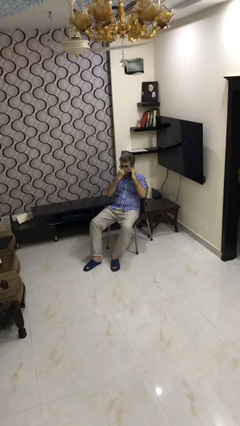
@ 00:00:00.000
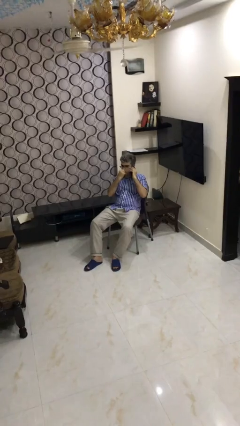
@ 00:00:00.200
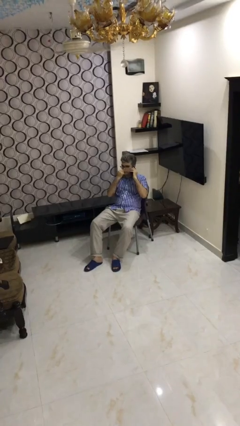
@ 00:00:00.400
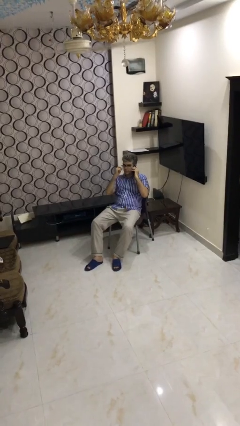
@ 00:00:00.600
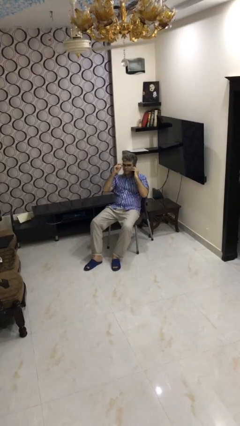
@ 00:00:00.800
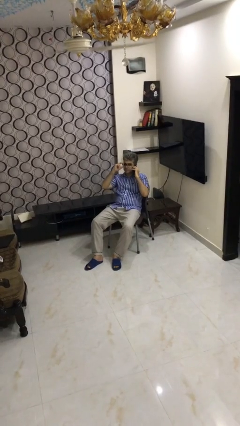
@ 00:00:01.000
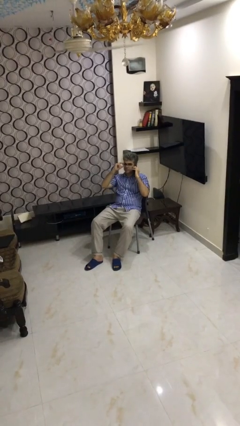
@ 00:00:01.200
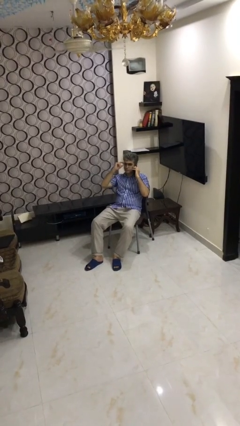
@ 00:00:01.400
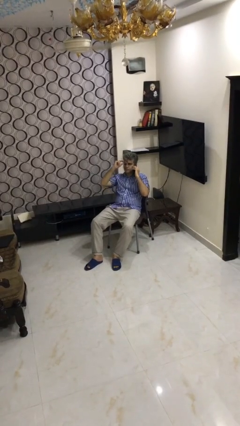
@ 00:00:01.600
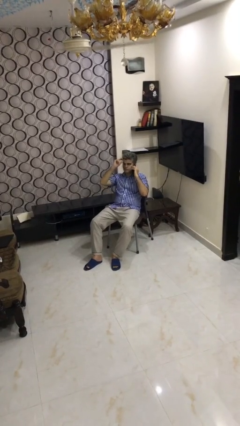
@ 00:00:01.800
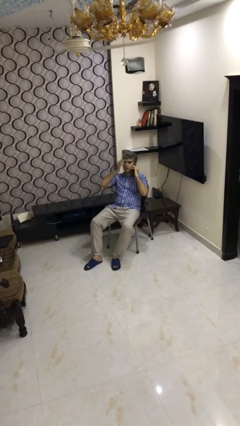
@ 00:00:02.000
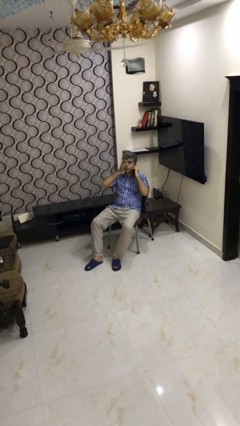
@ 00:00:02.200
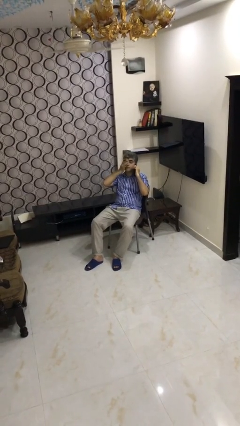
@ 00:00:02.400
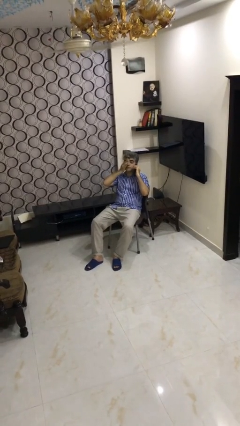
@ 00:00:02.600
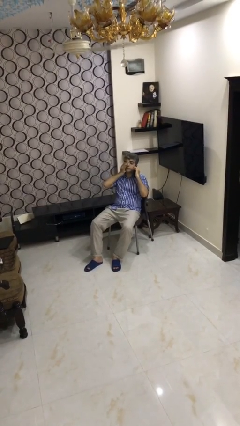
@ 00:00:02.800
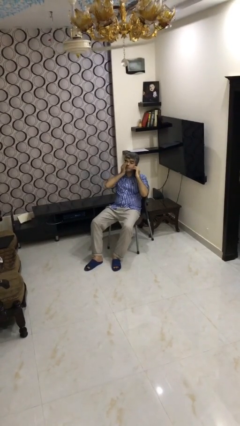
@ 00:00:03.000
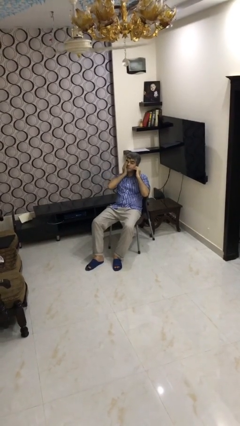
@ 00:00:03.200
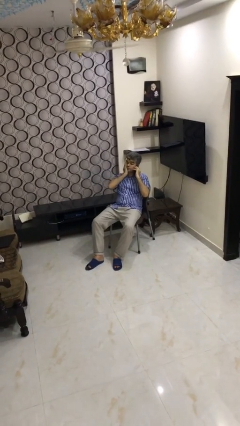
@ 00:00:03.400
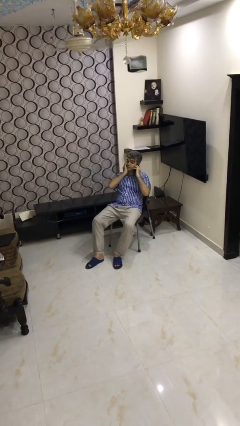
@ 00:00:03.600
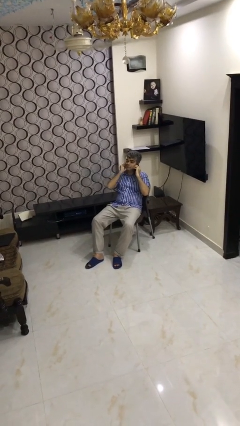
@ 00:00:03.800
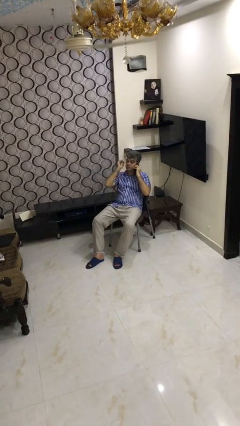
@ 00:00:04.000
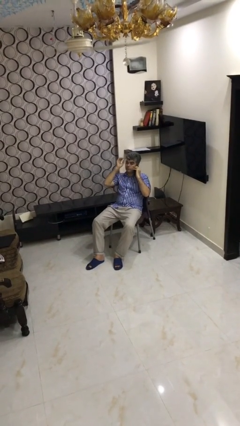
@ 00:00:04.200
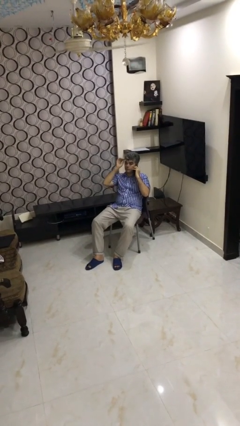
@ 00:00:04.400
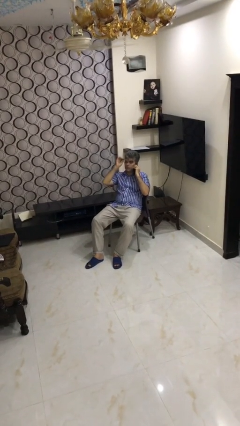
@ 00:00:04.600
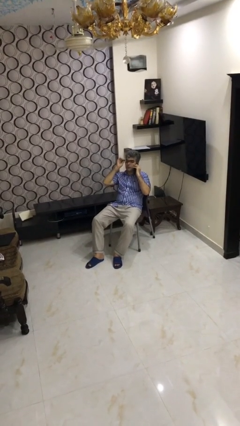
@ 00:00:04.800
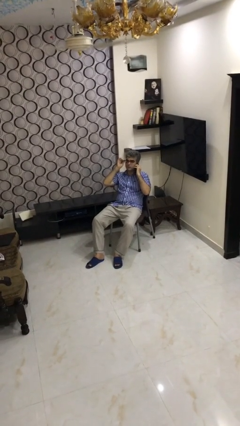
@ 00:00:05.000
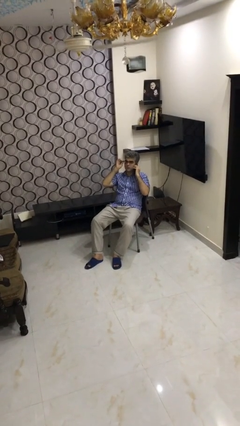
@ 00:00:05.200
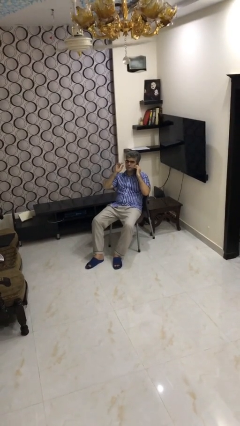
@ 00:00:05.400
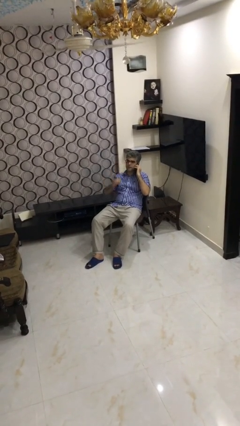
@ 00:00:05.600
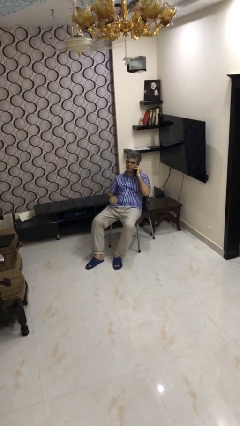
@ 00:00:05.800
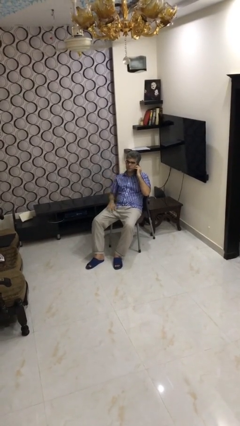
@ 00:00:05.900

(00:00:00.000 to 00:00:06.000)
person talks on phone

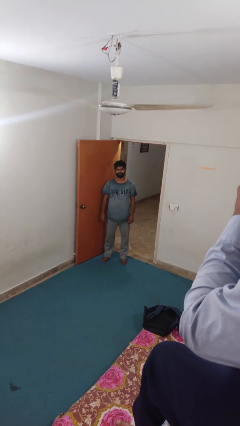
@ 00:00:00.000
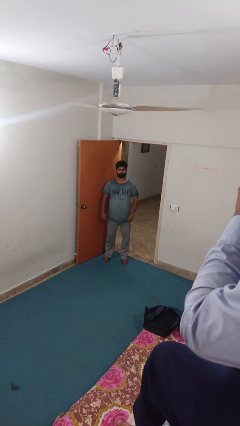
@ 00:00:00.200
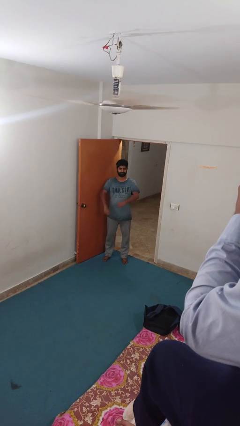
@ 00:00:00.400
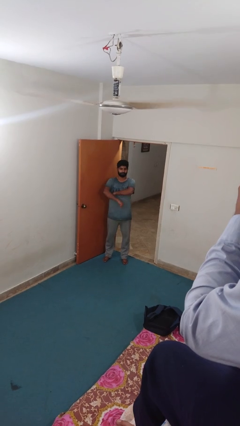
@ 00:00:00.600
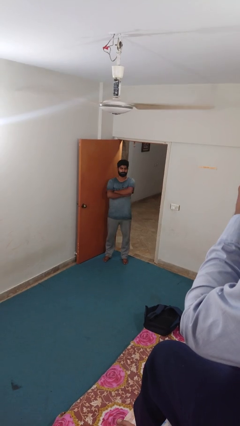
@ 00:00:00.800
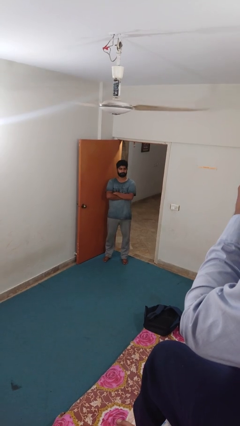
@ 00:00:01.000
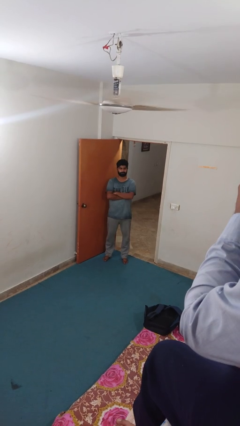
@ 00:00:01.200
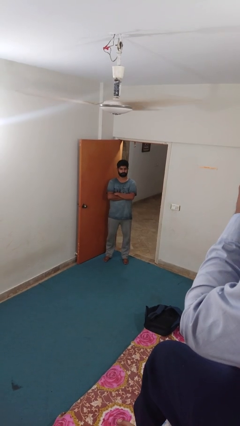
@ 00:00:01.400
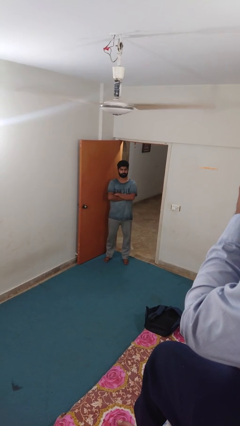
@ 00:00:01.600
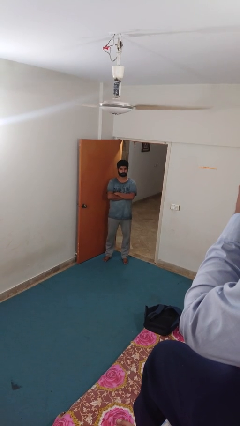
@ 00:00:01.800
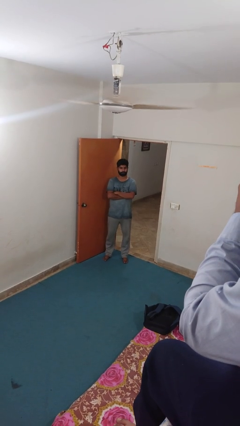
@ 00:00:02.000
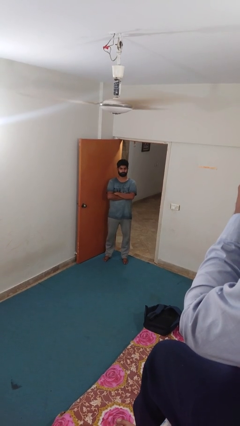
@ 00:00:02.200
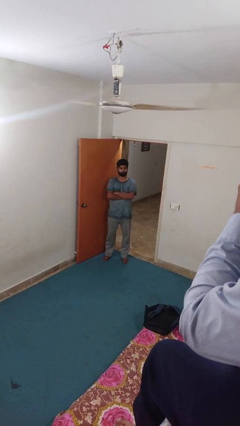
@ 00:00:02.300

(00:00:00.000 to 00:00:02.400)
person crosses arms

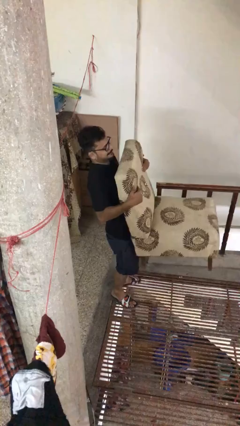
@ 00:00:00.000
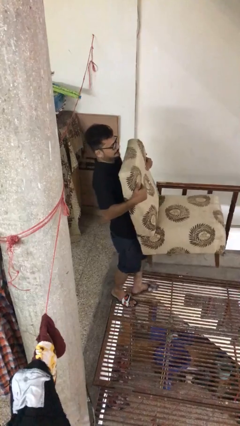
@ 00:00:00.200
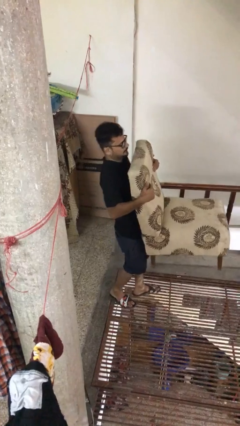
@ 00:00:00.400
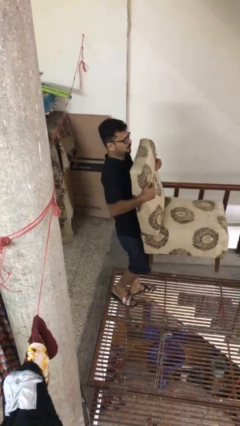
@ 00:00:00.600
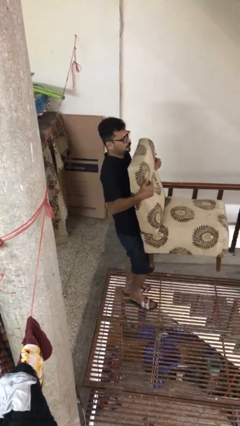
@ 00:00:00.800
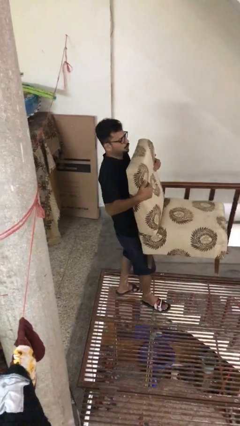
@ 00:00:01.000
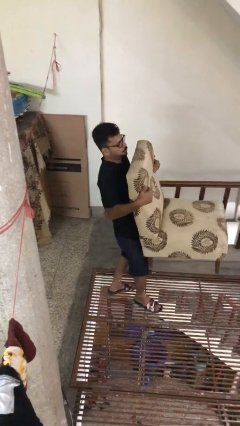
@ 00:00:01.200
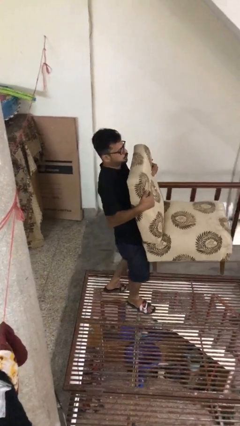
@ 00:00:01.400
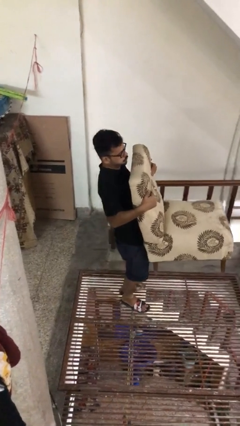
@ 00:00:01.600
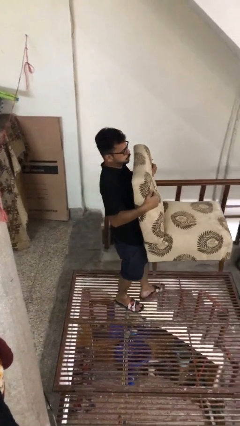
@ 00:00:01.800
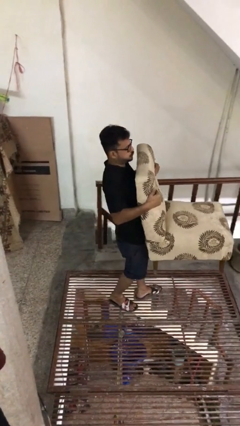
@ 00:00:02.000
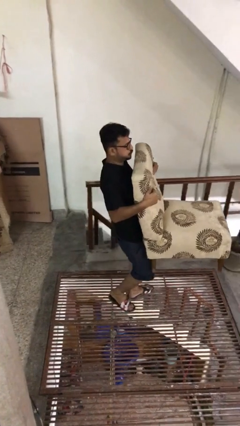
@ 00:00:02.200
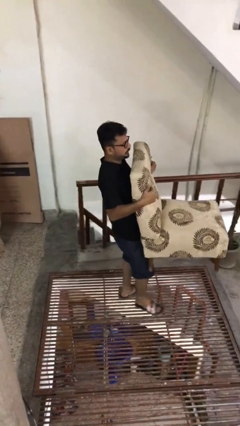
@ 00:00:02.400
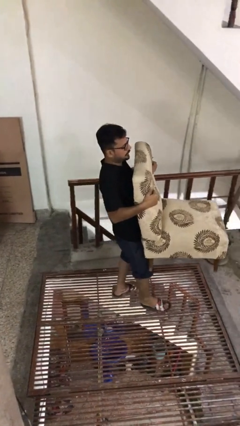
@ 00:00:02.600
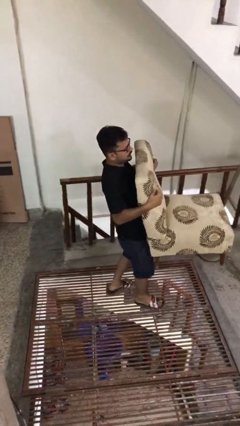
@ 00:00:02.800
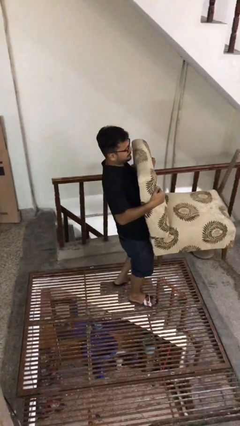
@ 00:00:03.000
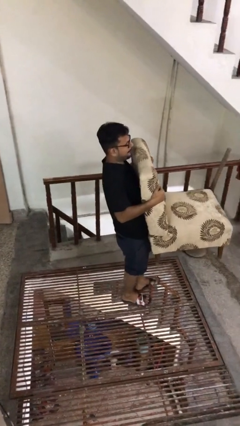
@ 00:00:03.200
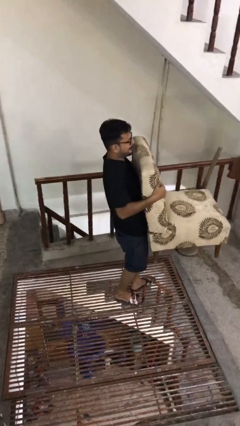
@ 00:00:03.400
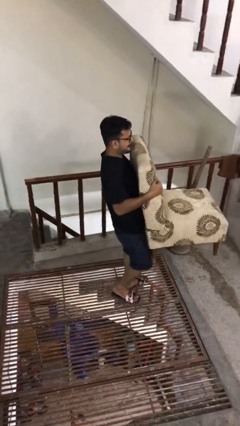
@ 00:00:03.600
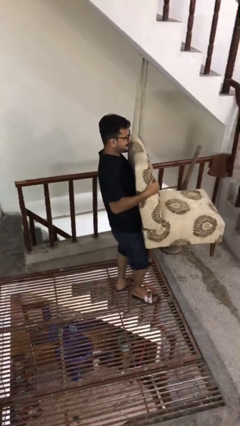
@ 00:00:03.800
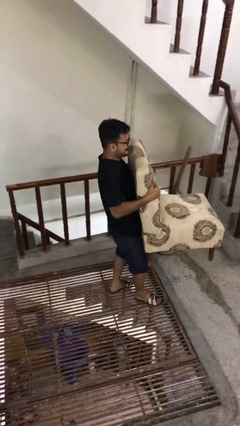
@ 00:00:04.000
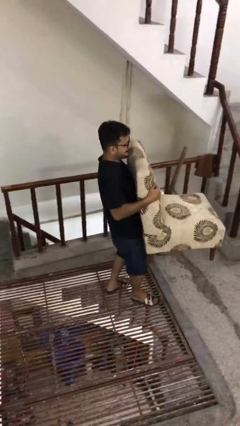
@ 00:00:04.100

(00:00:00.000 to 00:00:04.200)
person carries heavy object

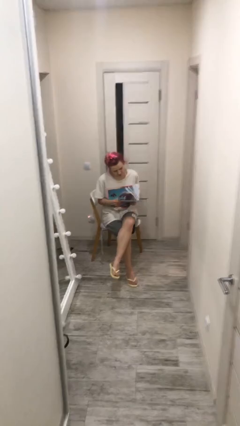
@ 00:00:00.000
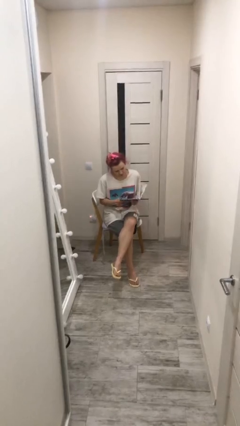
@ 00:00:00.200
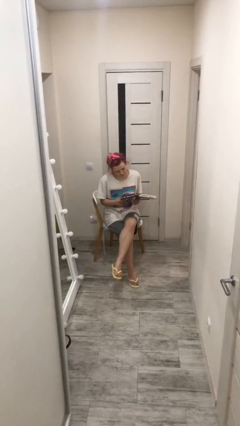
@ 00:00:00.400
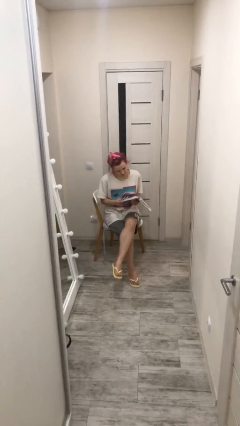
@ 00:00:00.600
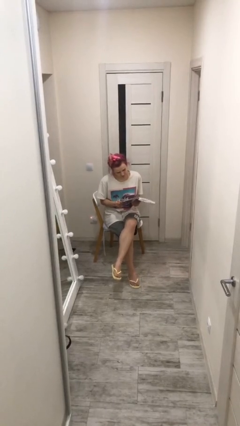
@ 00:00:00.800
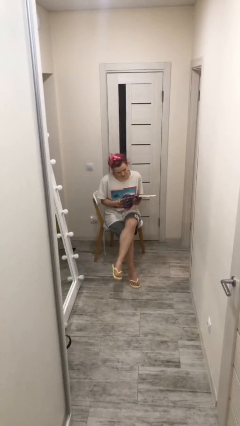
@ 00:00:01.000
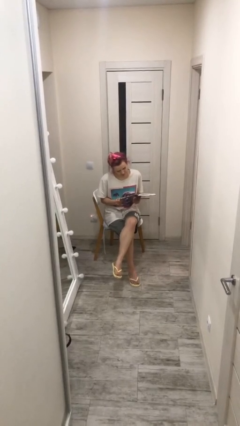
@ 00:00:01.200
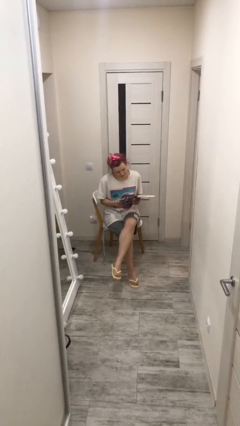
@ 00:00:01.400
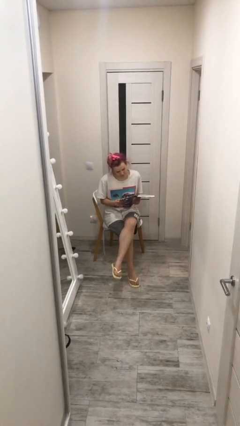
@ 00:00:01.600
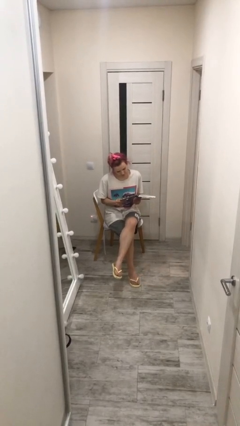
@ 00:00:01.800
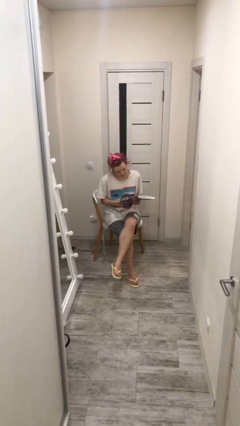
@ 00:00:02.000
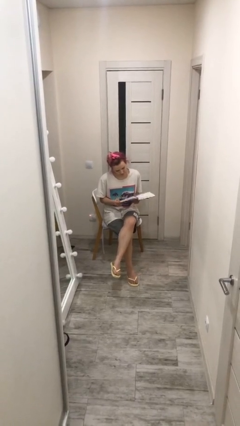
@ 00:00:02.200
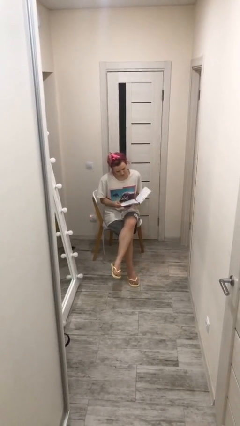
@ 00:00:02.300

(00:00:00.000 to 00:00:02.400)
person reads document

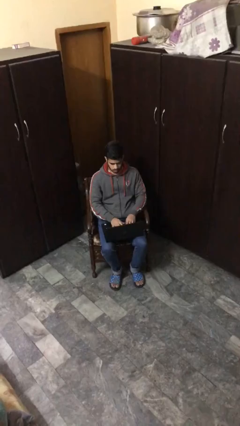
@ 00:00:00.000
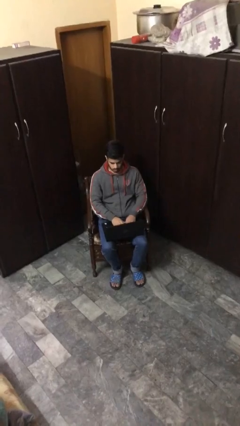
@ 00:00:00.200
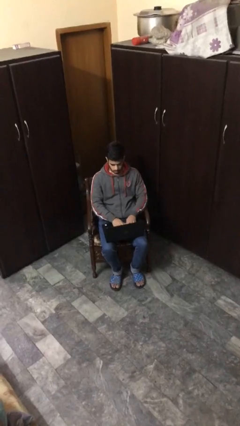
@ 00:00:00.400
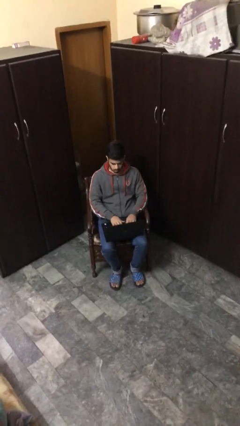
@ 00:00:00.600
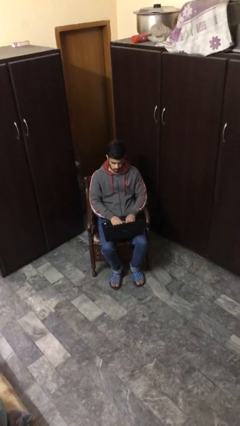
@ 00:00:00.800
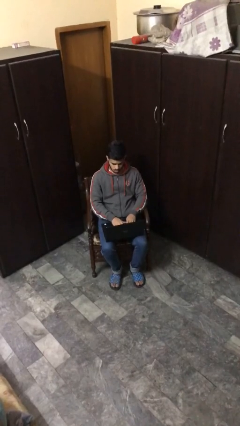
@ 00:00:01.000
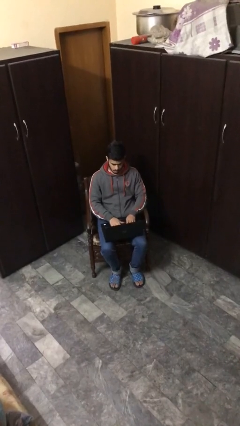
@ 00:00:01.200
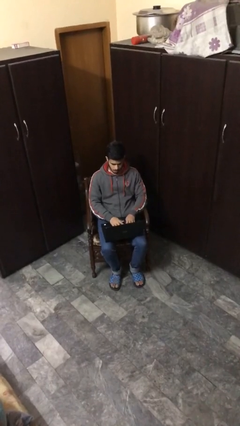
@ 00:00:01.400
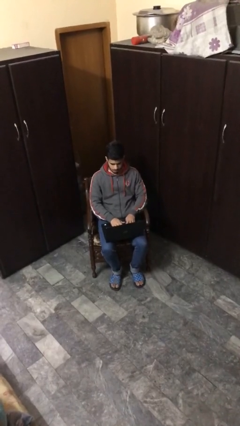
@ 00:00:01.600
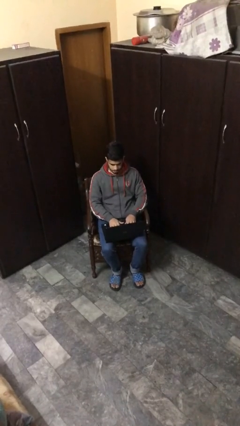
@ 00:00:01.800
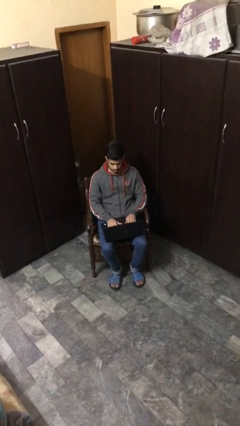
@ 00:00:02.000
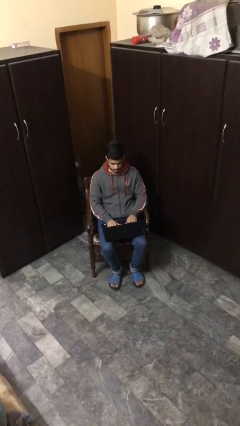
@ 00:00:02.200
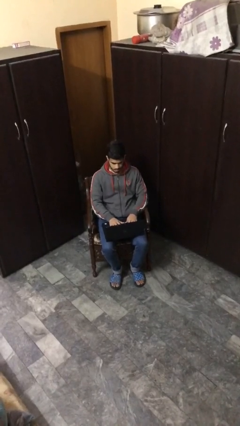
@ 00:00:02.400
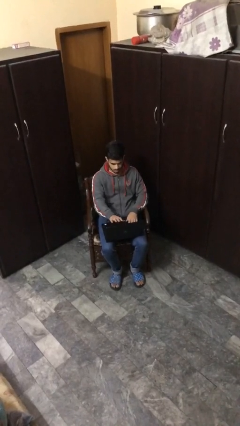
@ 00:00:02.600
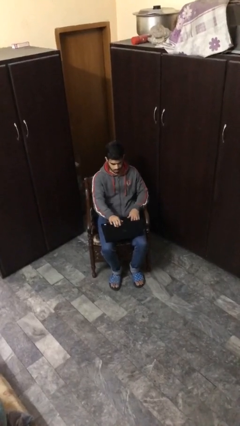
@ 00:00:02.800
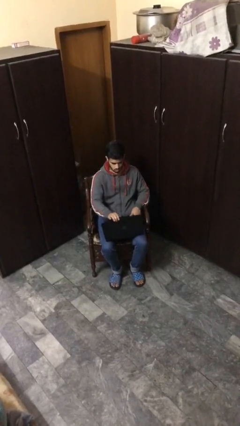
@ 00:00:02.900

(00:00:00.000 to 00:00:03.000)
person interacts with laptop
